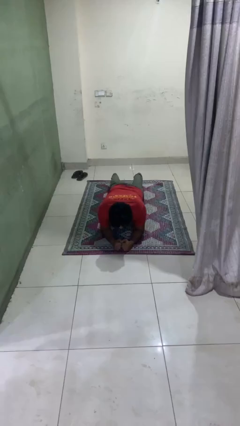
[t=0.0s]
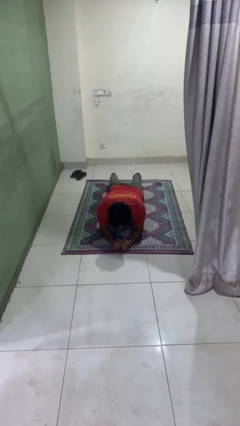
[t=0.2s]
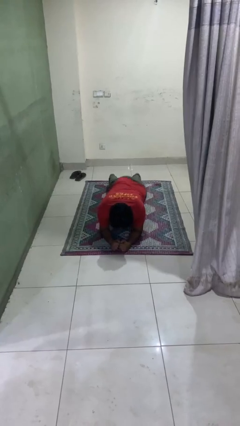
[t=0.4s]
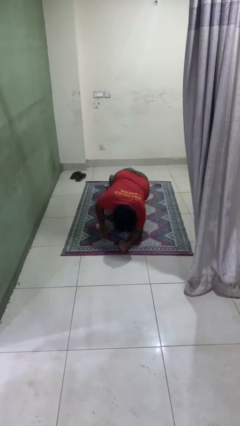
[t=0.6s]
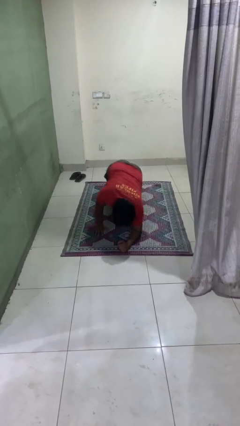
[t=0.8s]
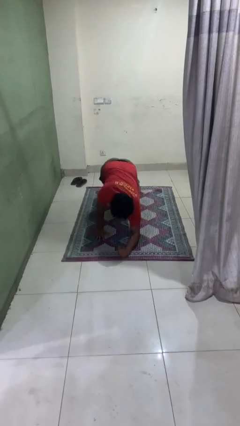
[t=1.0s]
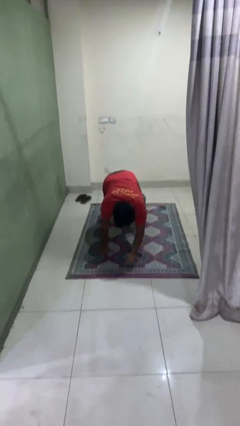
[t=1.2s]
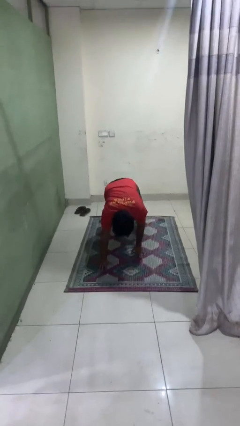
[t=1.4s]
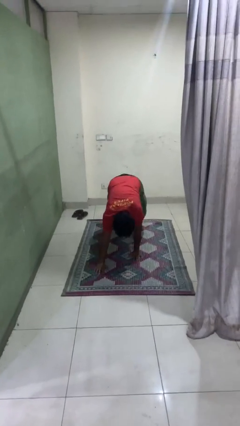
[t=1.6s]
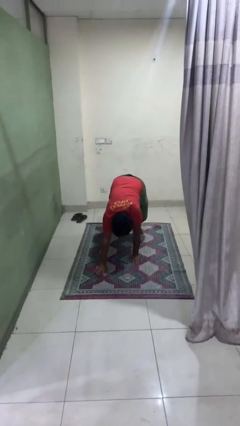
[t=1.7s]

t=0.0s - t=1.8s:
person stands up from floor

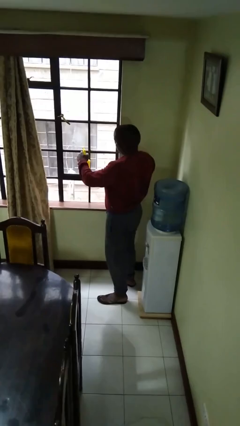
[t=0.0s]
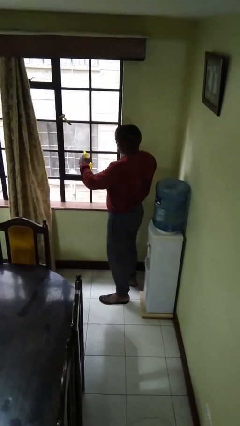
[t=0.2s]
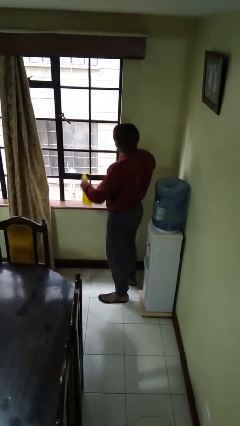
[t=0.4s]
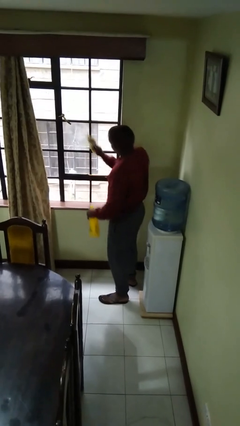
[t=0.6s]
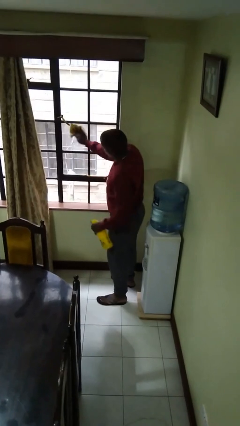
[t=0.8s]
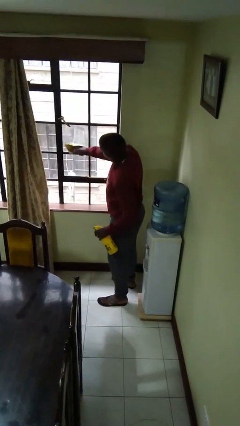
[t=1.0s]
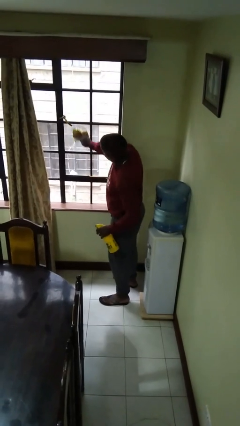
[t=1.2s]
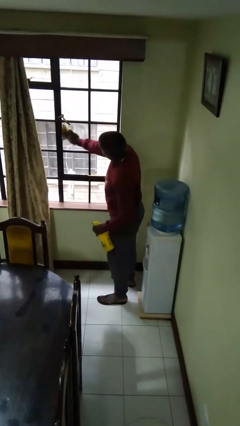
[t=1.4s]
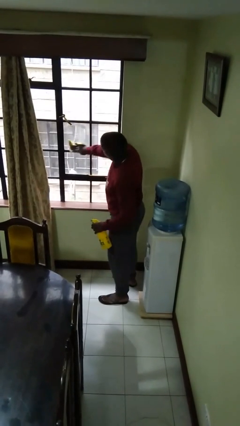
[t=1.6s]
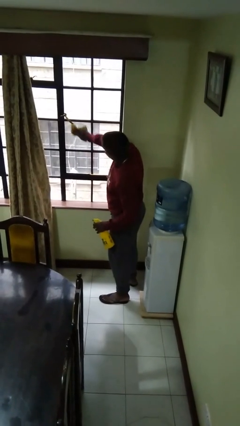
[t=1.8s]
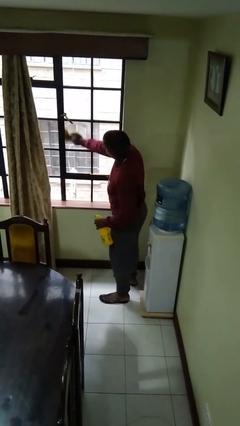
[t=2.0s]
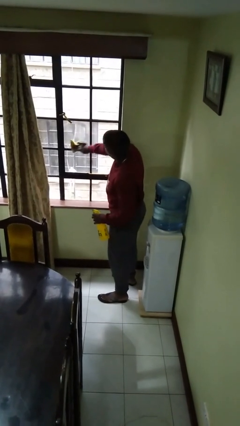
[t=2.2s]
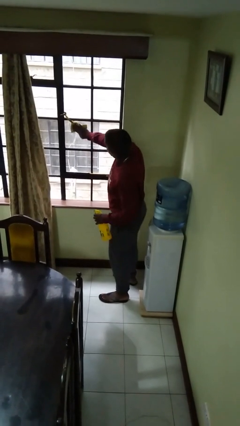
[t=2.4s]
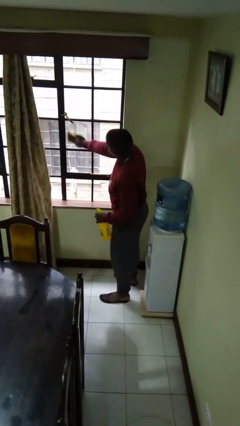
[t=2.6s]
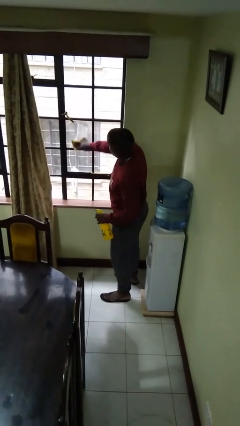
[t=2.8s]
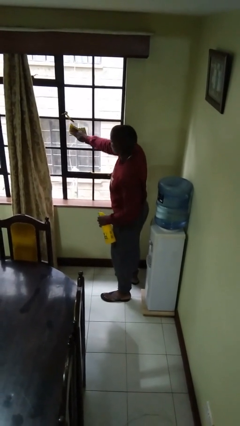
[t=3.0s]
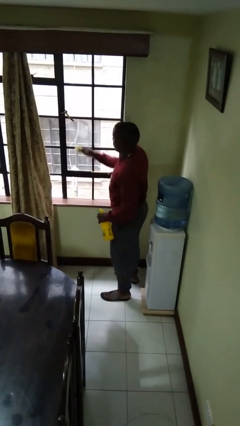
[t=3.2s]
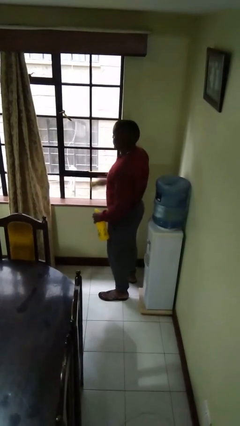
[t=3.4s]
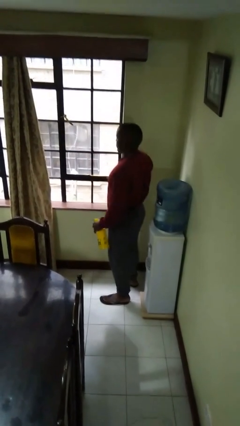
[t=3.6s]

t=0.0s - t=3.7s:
person washes window

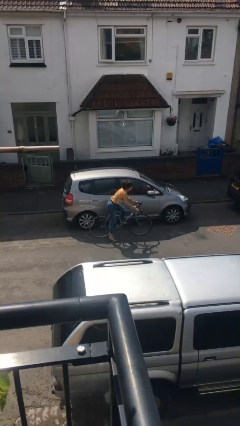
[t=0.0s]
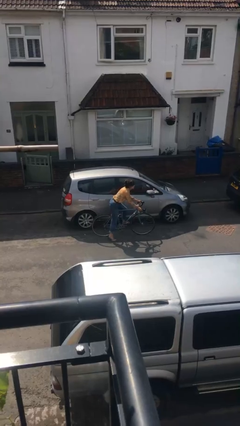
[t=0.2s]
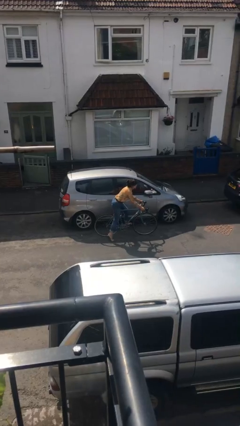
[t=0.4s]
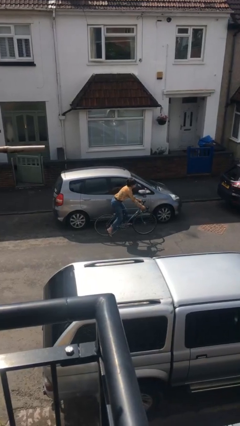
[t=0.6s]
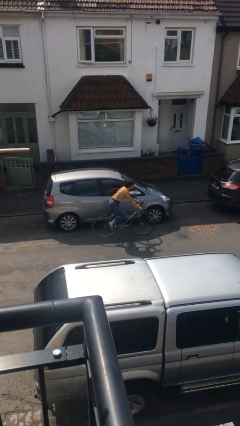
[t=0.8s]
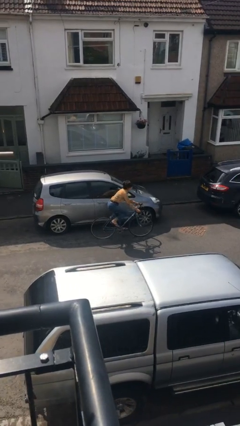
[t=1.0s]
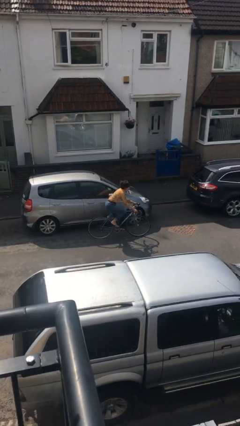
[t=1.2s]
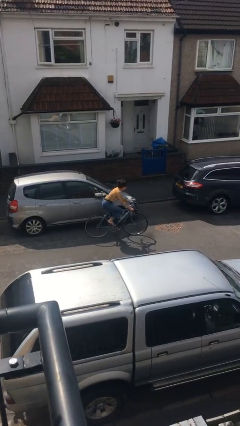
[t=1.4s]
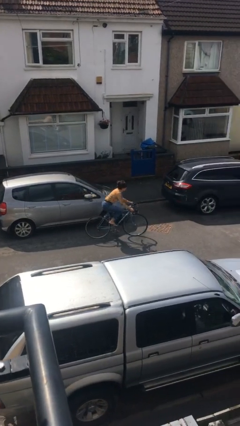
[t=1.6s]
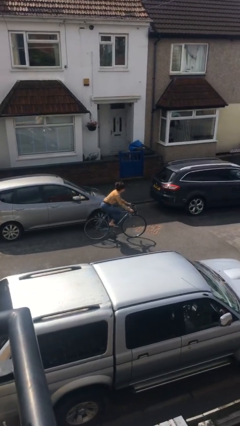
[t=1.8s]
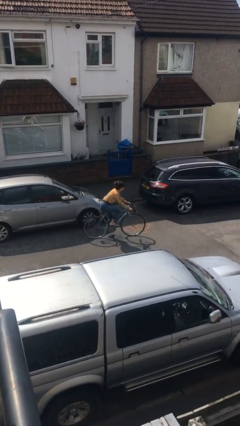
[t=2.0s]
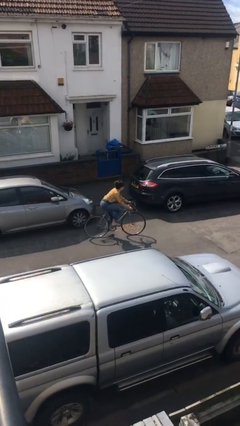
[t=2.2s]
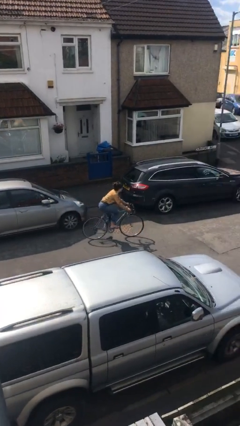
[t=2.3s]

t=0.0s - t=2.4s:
person rides bicycle

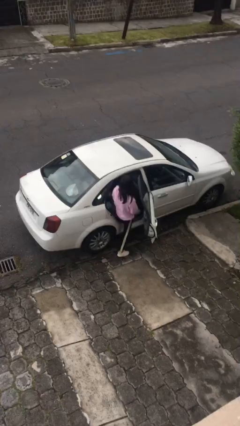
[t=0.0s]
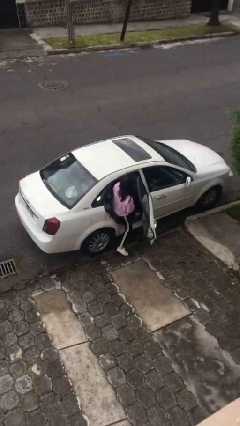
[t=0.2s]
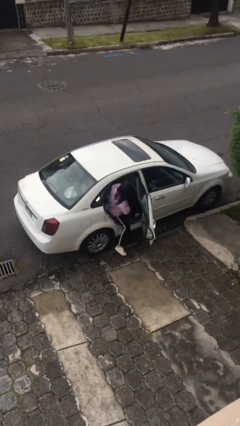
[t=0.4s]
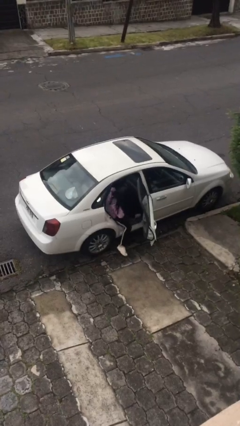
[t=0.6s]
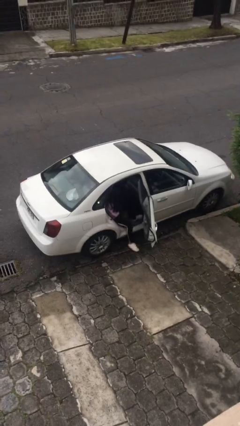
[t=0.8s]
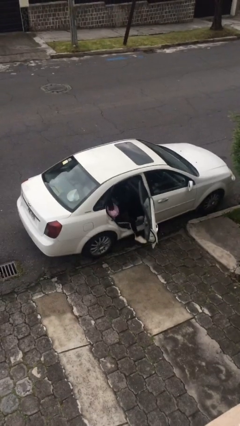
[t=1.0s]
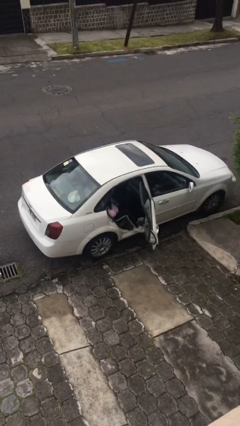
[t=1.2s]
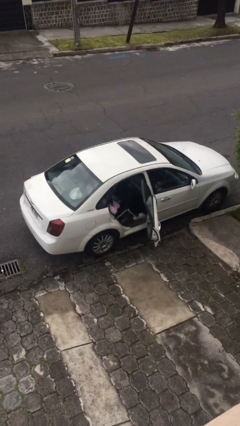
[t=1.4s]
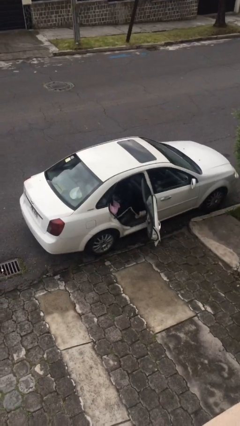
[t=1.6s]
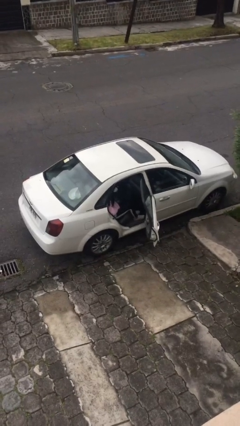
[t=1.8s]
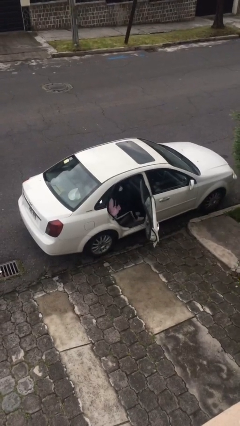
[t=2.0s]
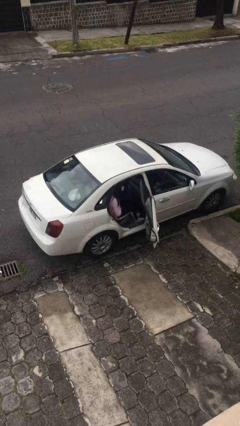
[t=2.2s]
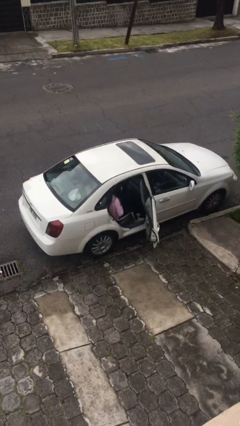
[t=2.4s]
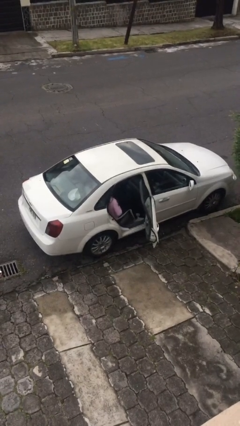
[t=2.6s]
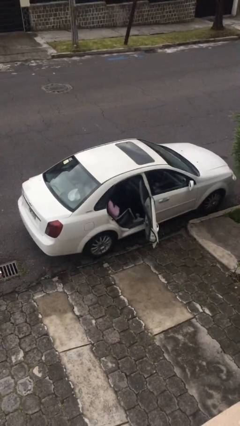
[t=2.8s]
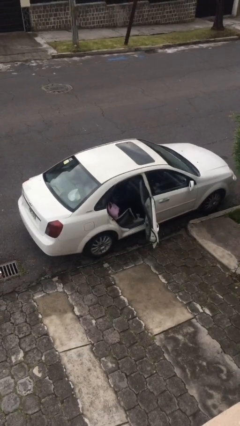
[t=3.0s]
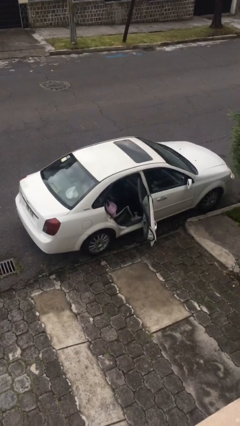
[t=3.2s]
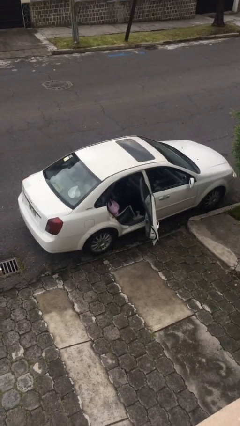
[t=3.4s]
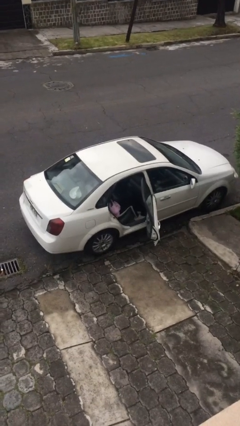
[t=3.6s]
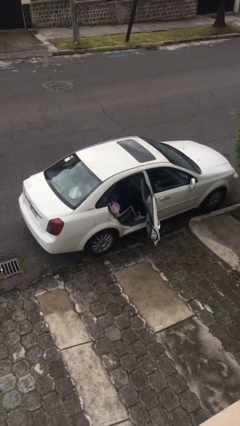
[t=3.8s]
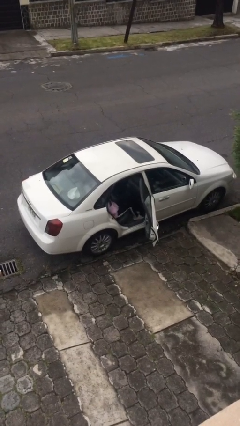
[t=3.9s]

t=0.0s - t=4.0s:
person enters car

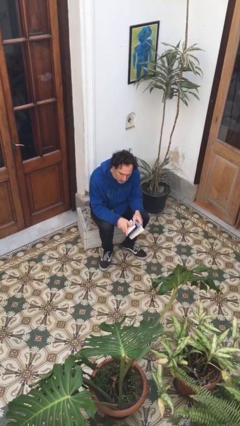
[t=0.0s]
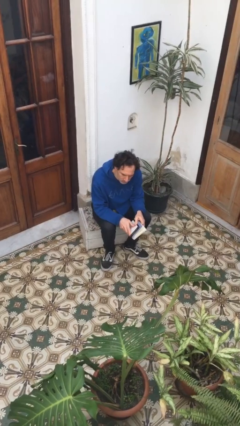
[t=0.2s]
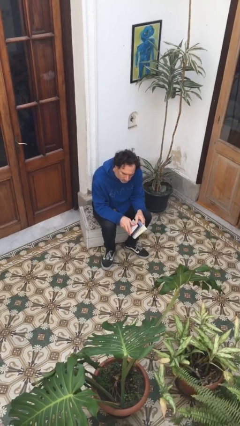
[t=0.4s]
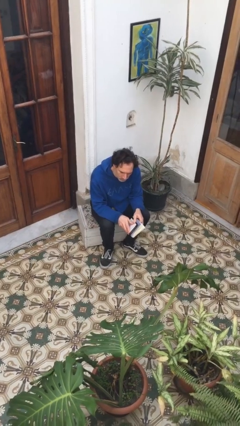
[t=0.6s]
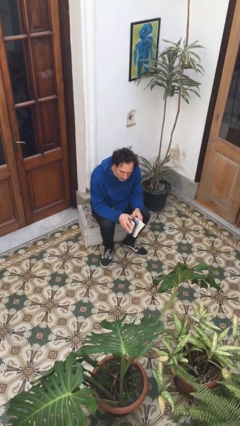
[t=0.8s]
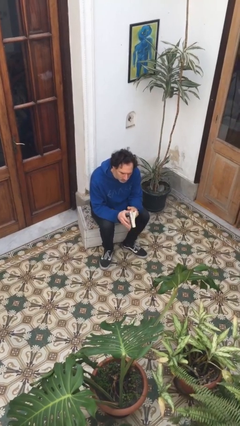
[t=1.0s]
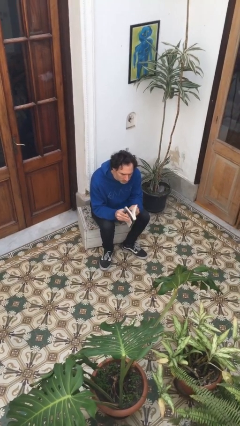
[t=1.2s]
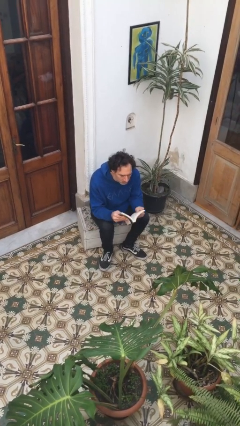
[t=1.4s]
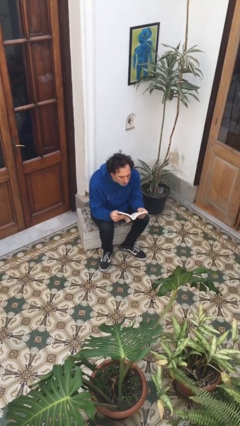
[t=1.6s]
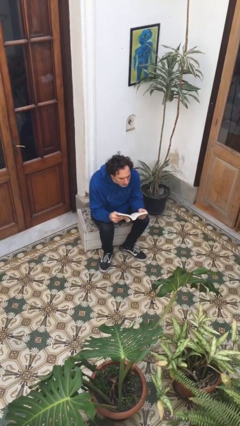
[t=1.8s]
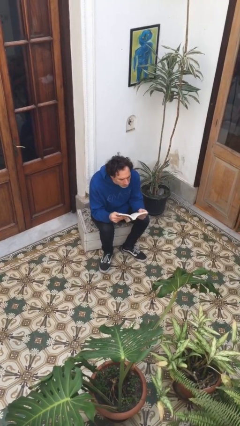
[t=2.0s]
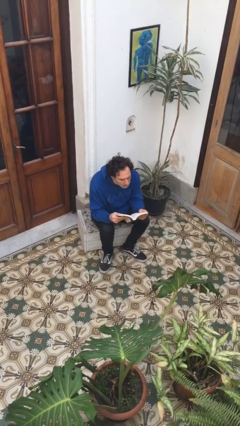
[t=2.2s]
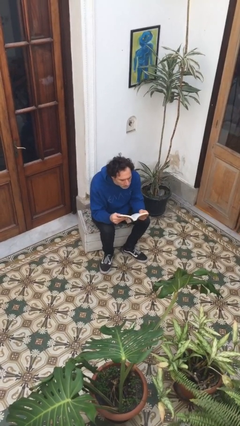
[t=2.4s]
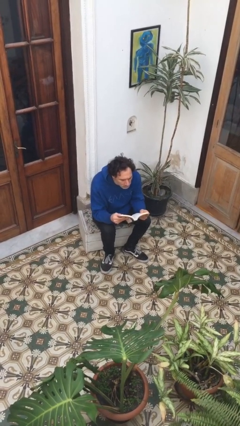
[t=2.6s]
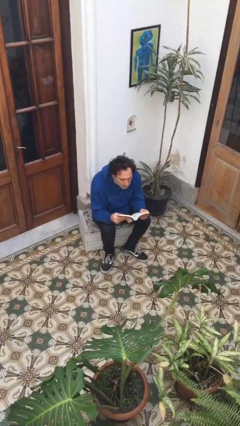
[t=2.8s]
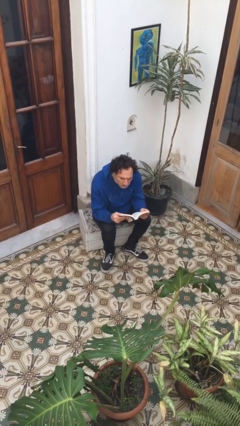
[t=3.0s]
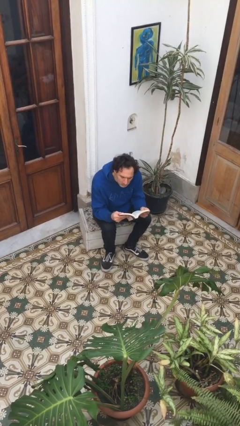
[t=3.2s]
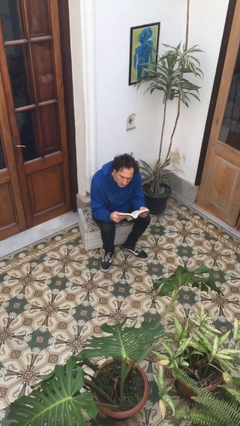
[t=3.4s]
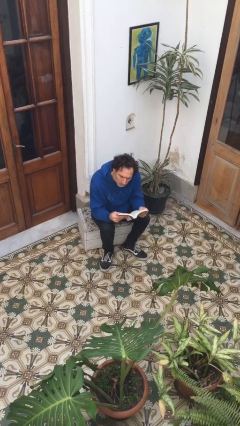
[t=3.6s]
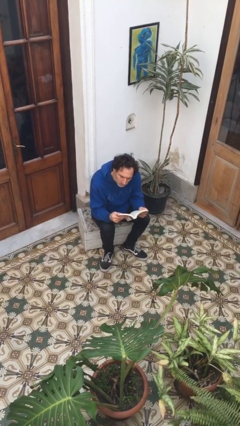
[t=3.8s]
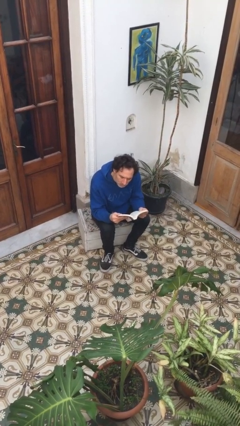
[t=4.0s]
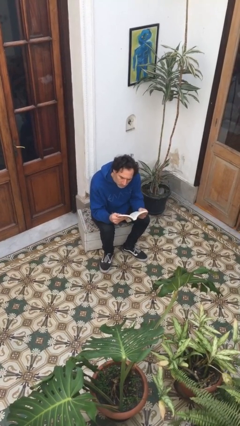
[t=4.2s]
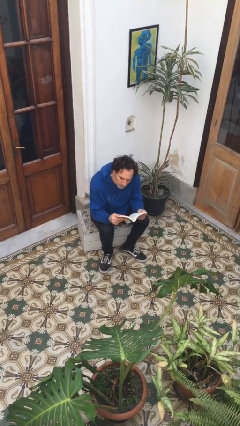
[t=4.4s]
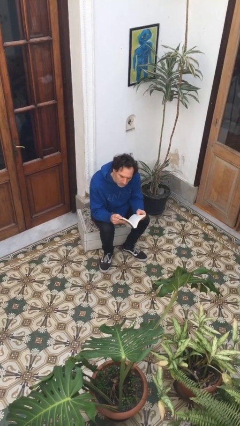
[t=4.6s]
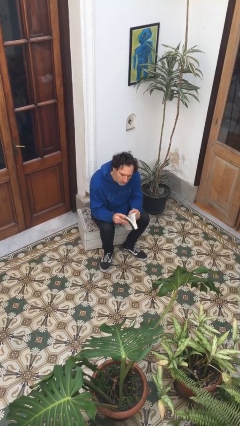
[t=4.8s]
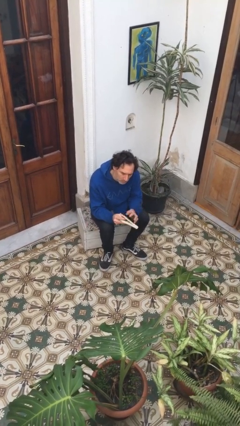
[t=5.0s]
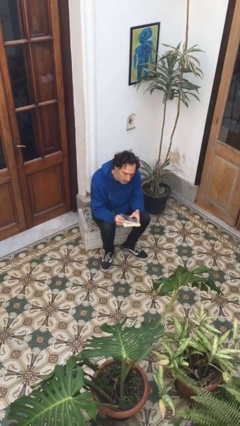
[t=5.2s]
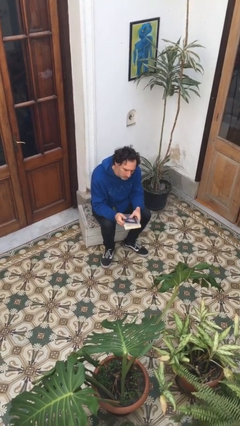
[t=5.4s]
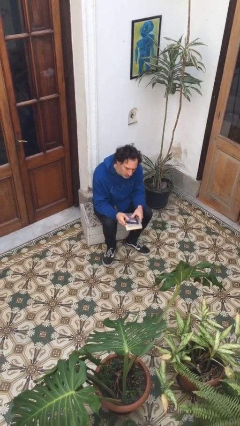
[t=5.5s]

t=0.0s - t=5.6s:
person reads book
